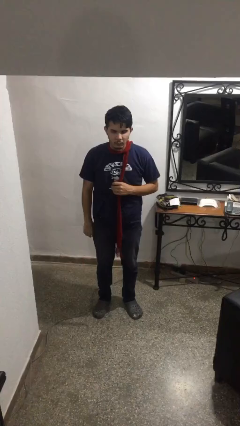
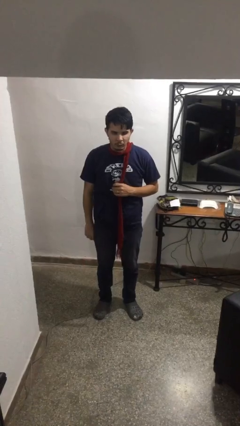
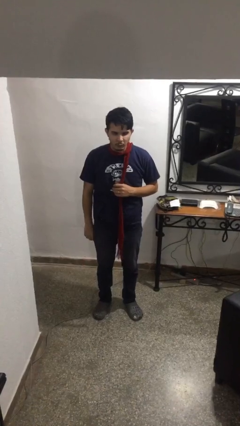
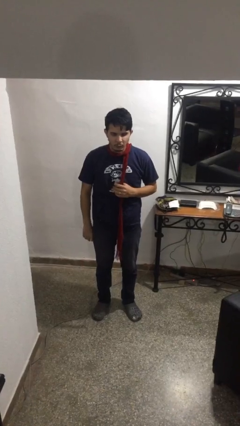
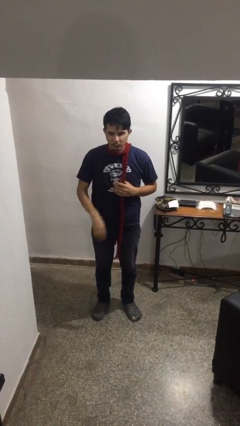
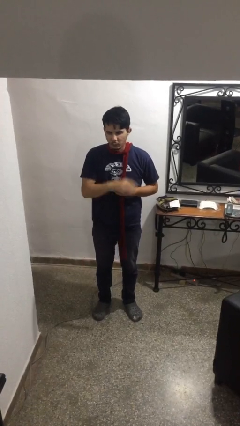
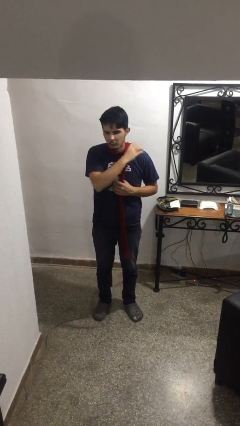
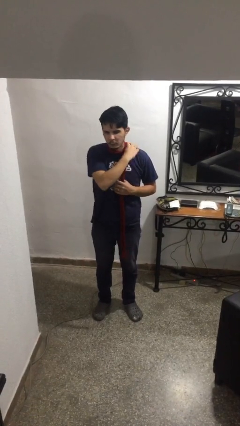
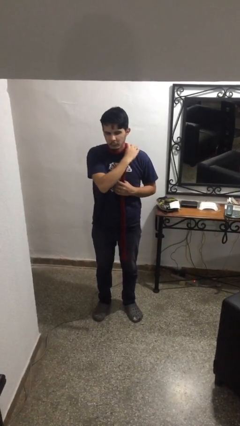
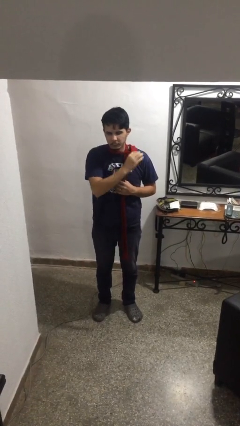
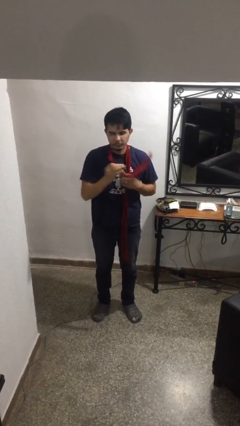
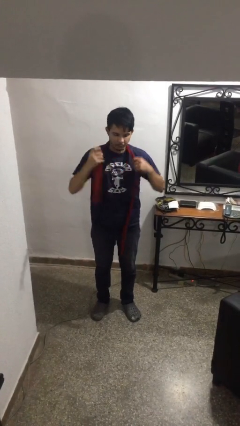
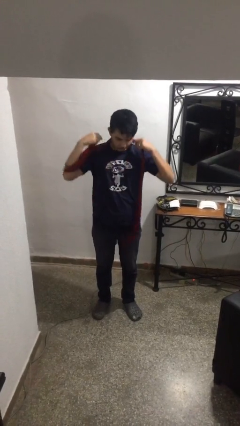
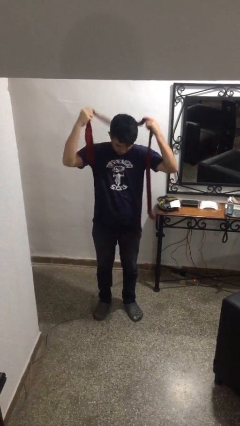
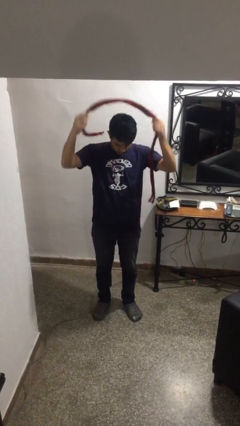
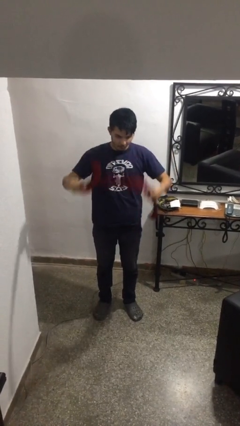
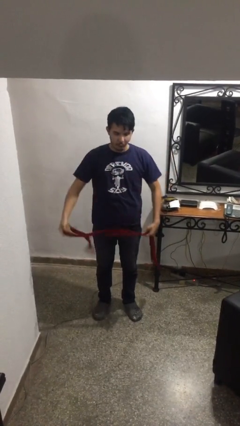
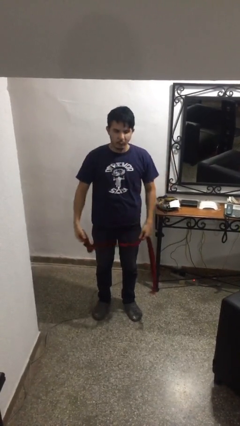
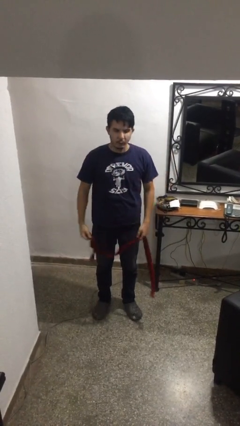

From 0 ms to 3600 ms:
person takes off scarf

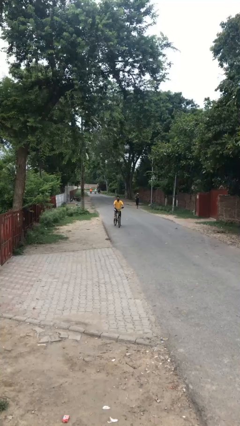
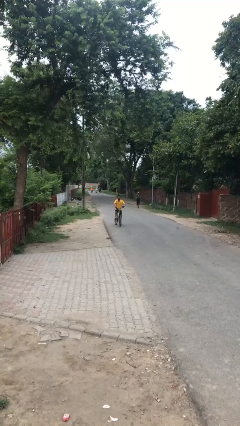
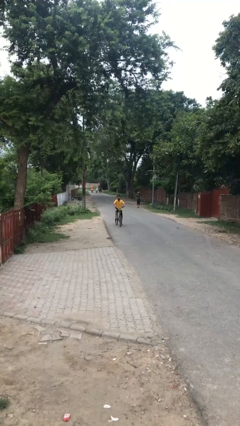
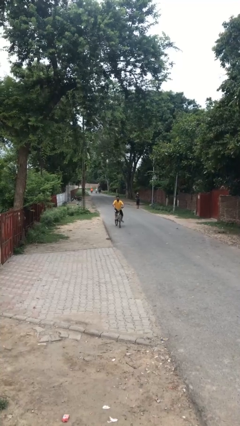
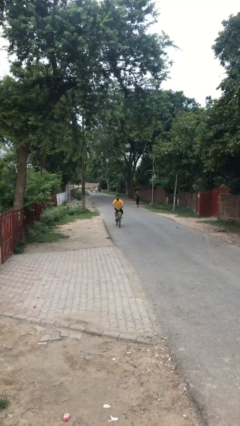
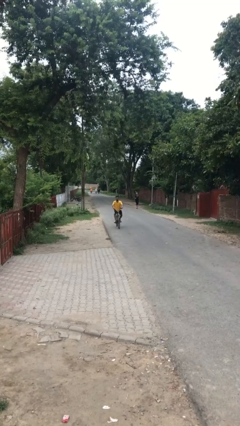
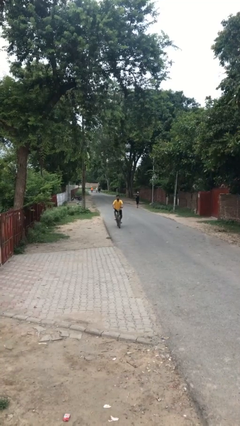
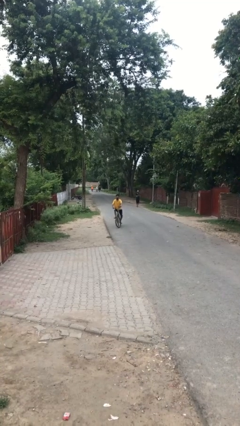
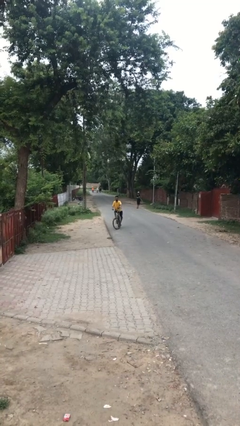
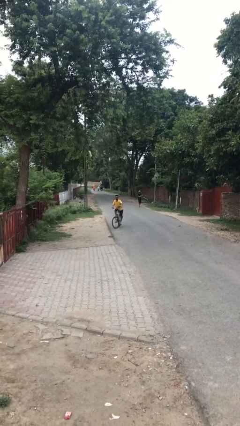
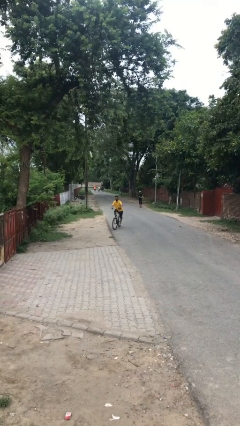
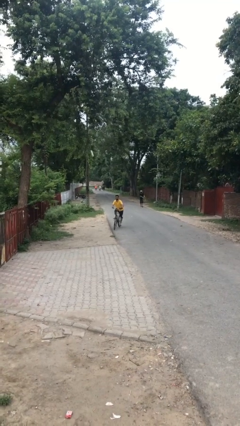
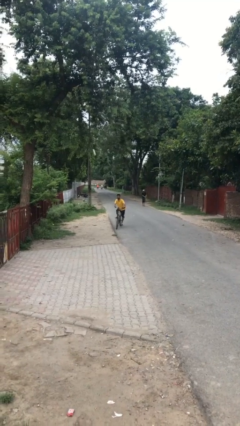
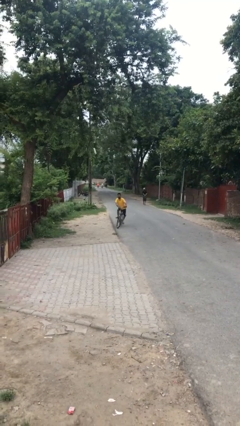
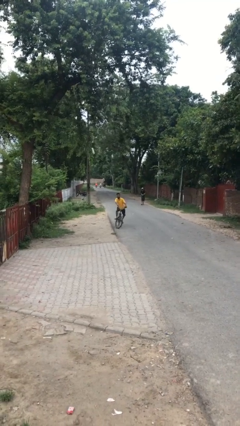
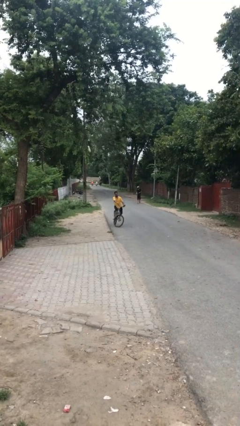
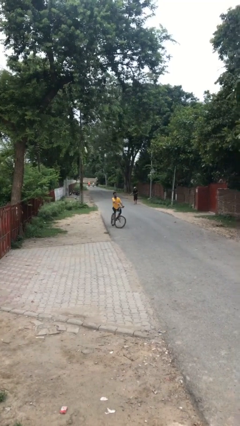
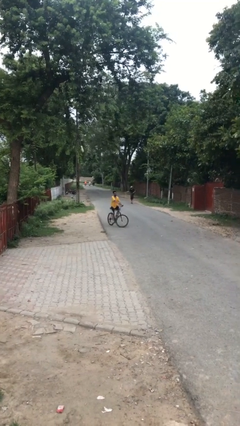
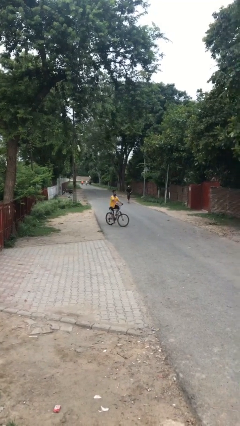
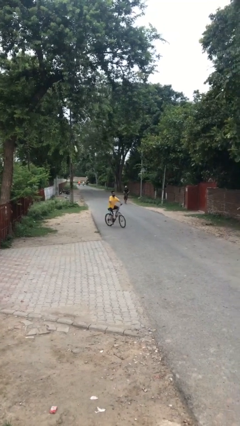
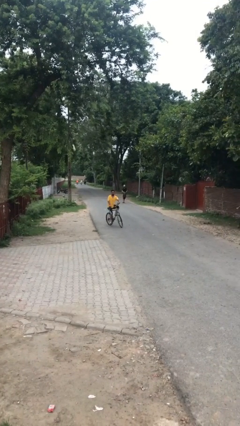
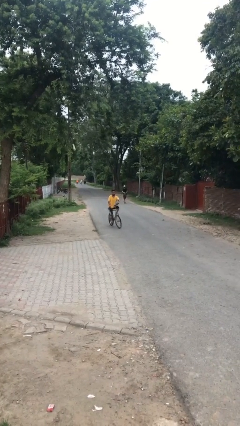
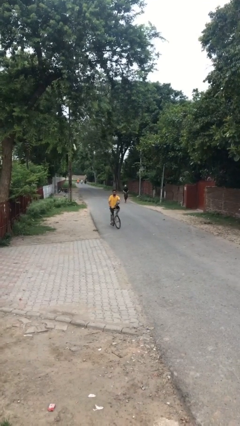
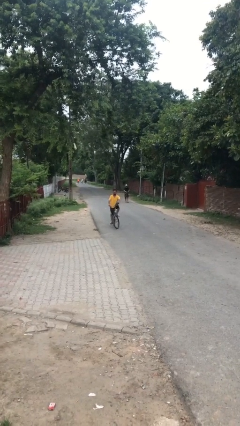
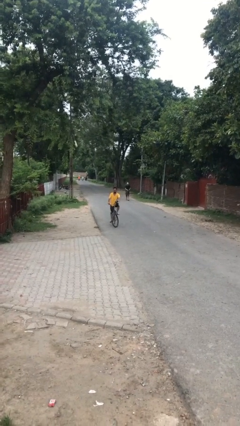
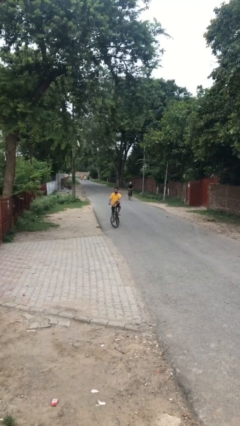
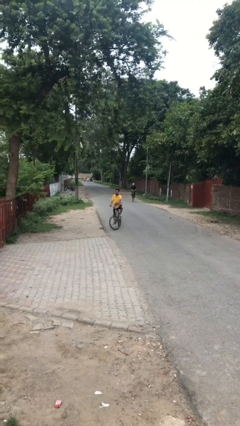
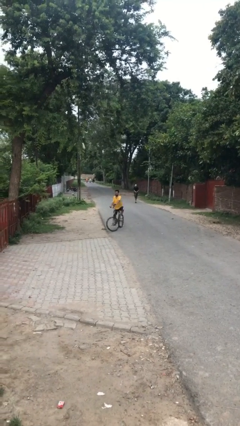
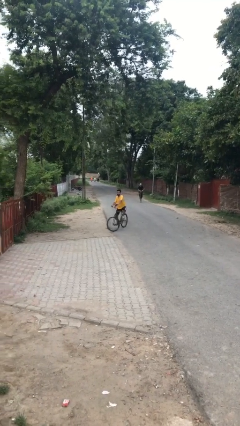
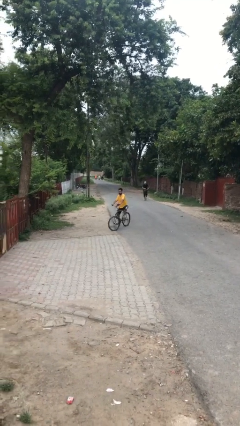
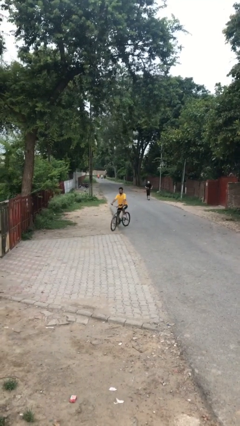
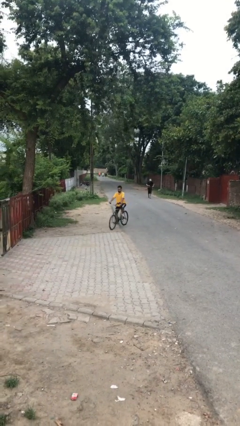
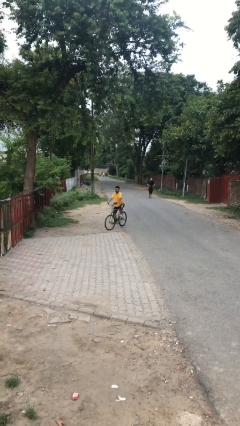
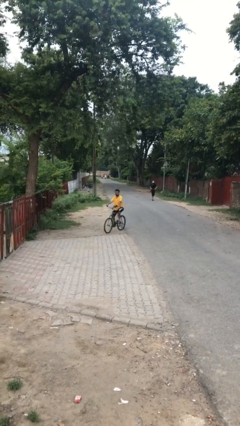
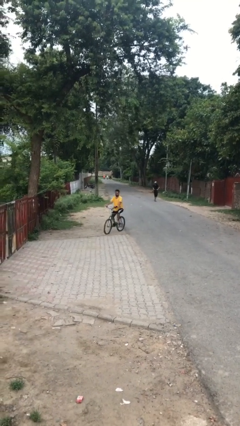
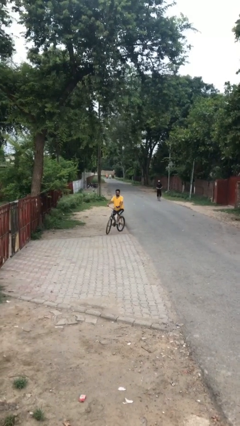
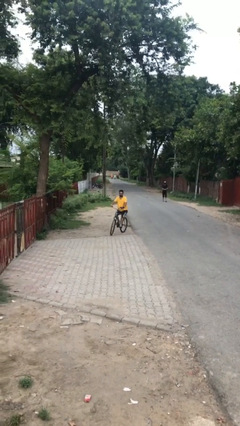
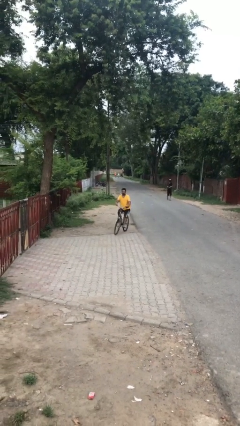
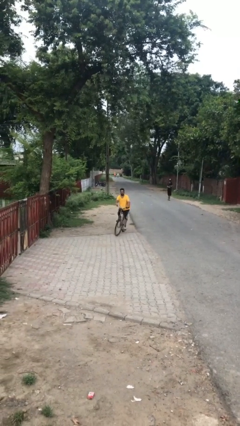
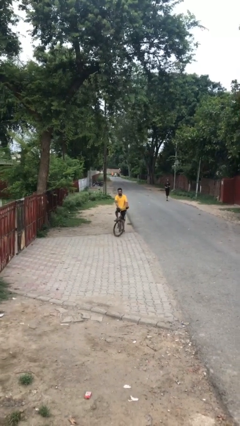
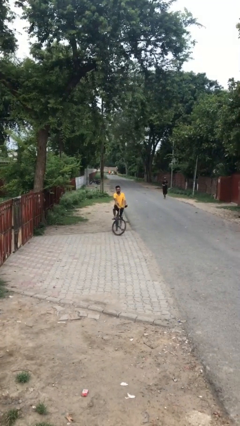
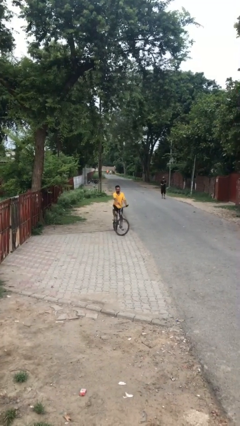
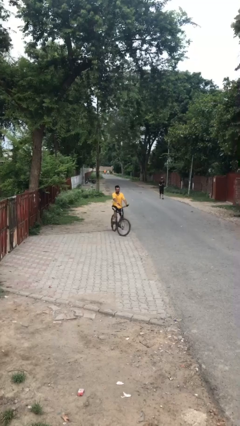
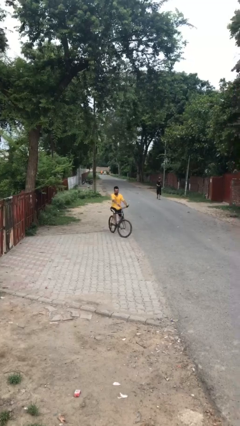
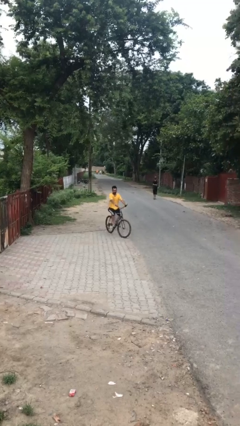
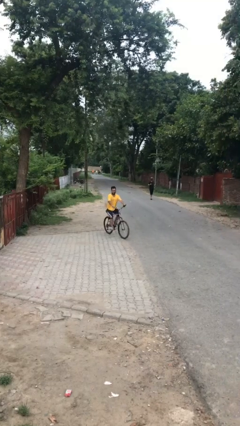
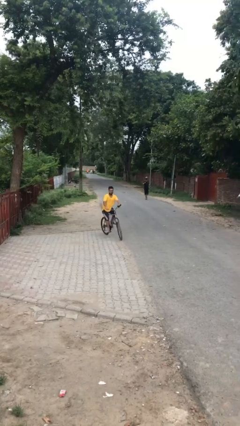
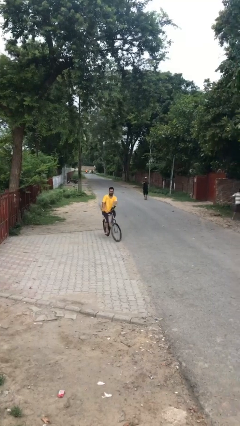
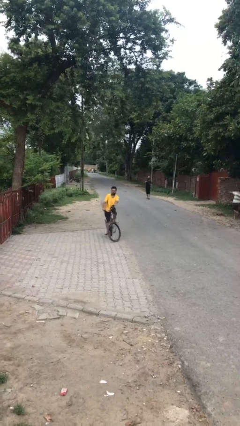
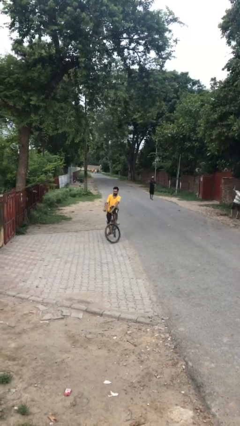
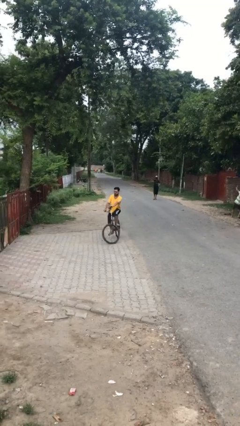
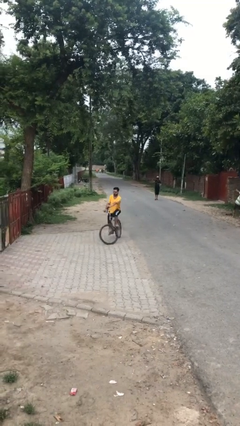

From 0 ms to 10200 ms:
person rides bicycle

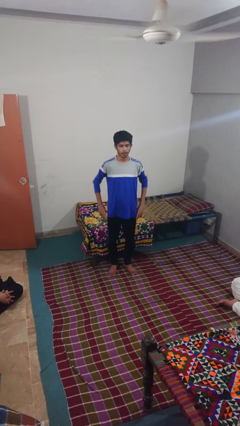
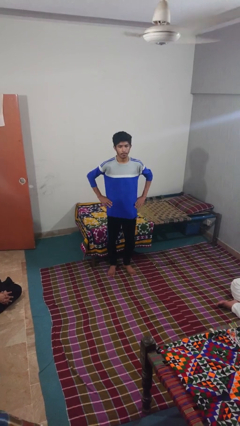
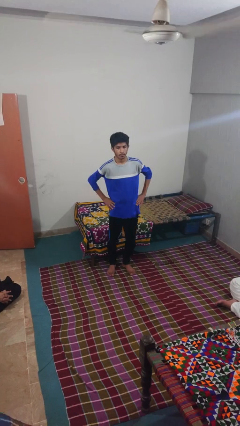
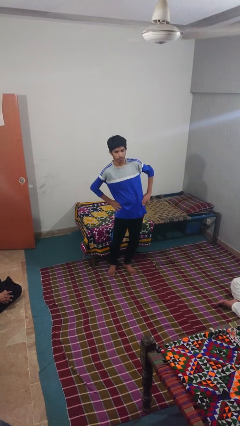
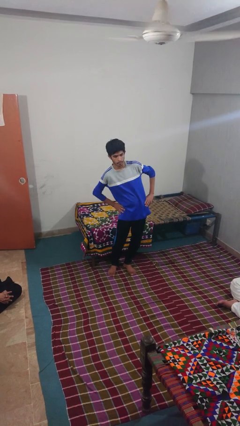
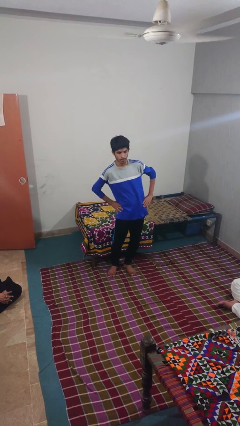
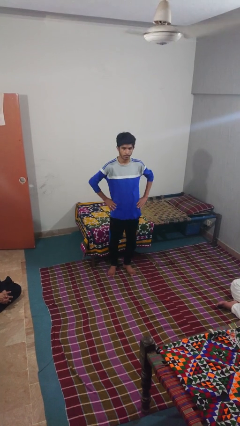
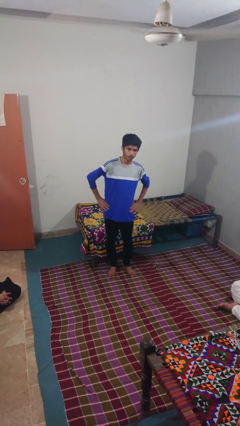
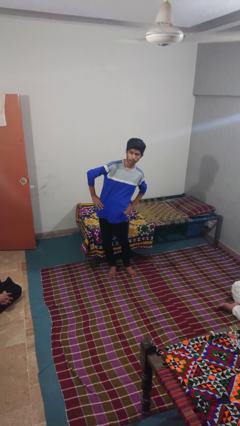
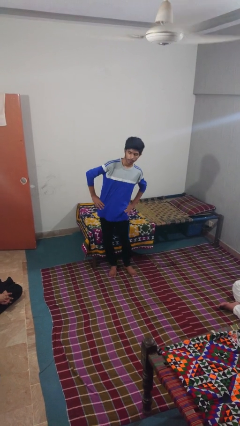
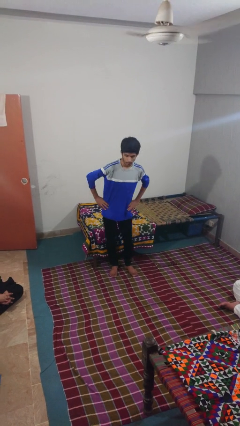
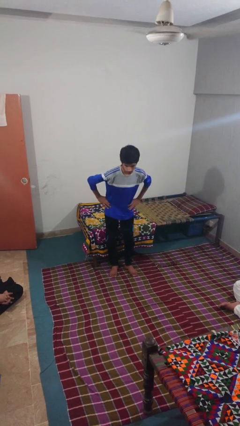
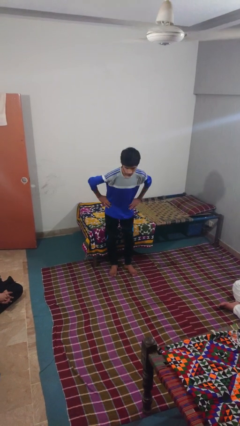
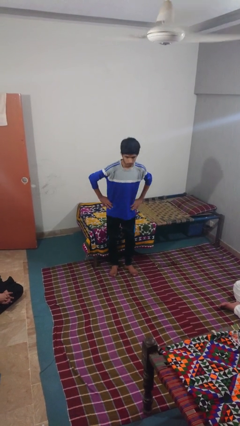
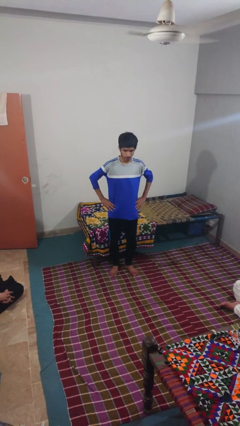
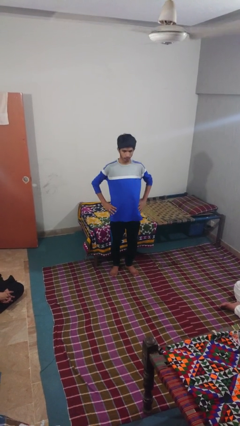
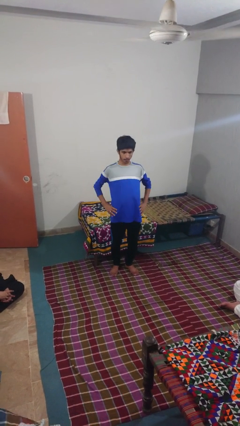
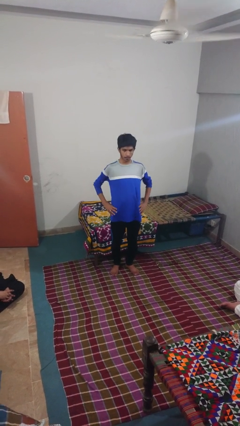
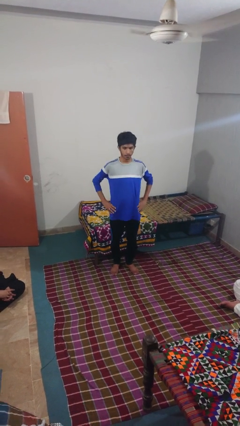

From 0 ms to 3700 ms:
person wiggles hips

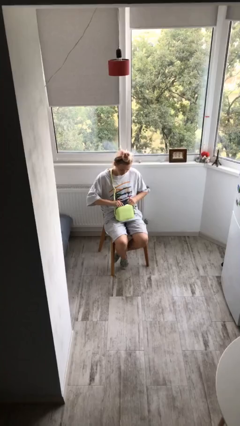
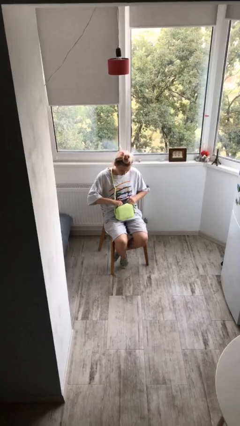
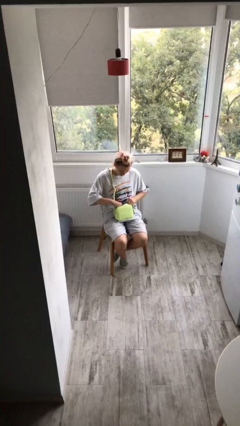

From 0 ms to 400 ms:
person puts object into purse

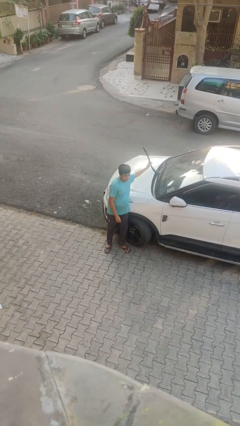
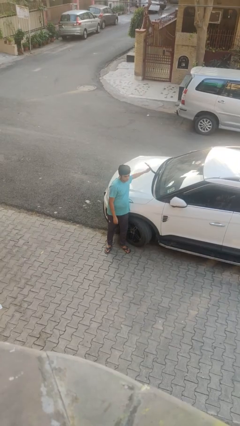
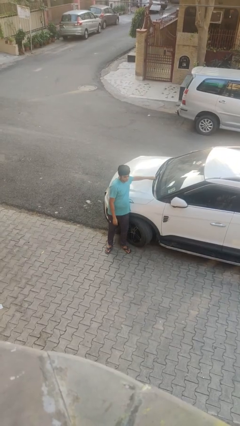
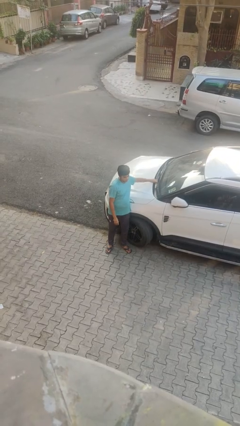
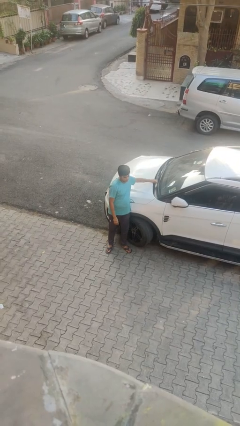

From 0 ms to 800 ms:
person flips down car wipers
